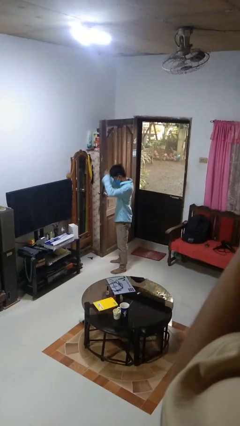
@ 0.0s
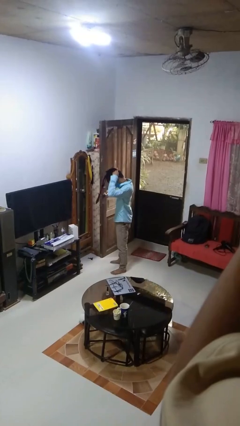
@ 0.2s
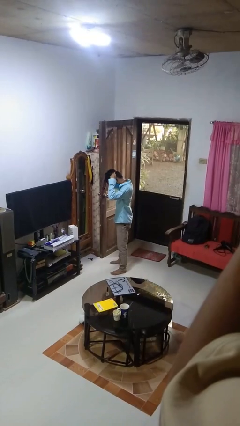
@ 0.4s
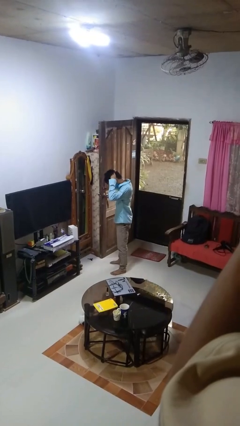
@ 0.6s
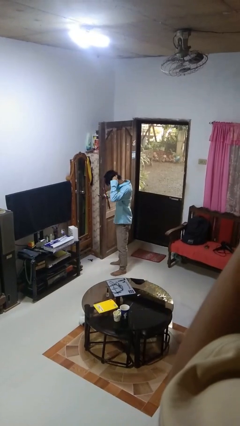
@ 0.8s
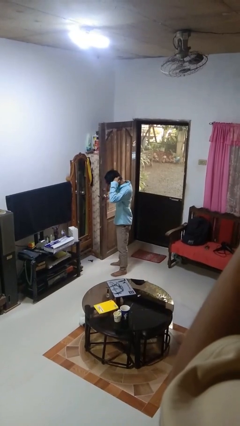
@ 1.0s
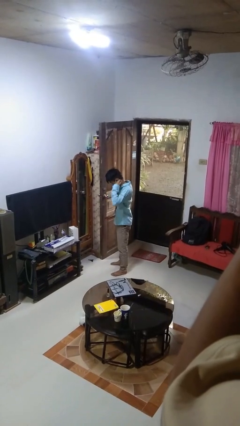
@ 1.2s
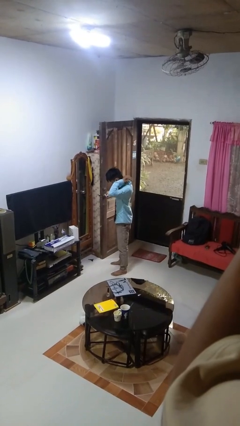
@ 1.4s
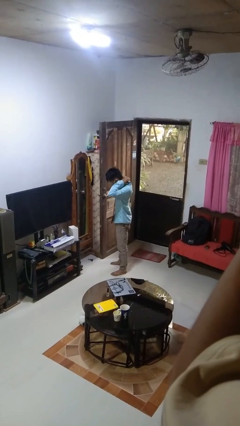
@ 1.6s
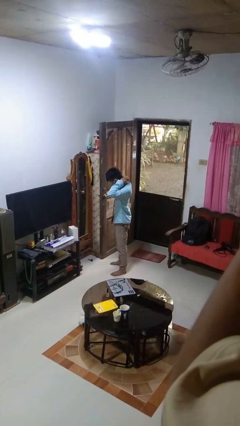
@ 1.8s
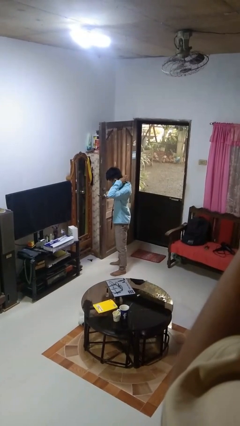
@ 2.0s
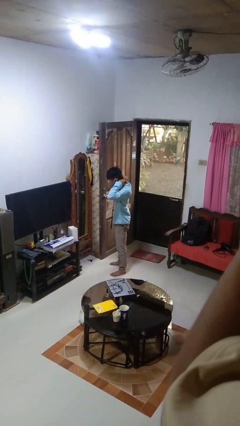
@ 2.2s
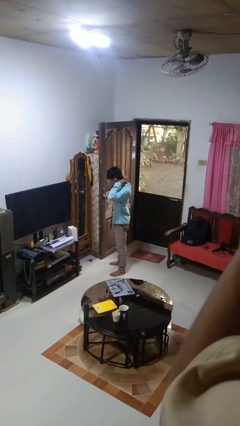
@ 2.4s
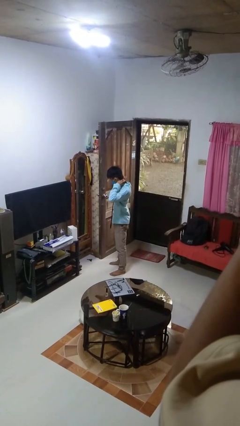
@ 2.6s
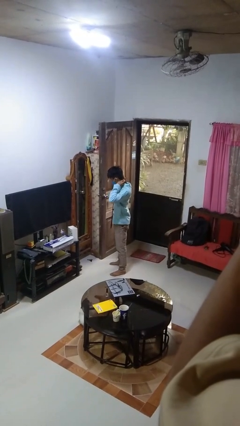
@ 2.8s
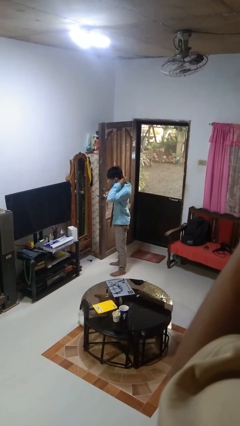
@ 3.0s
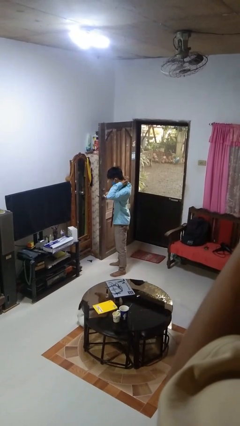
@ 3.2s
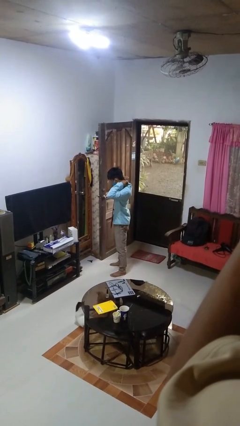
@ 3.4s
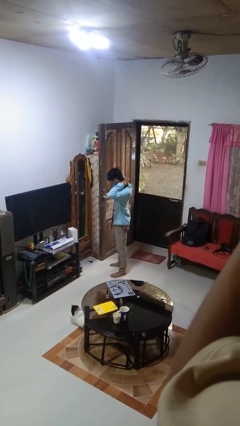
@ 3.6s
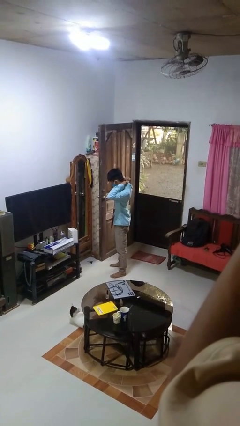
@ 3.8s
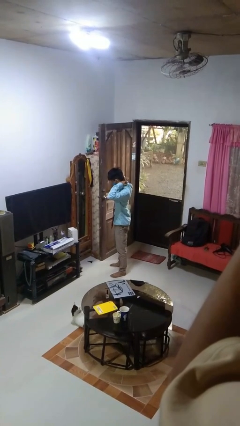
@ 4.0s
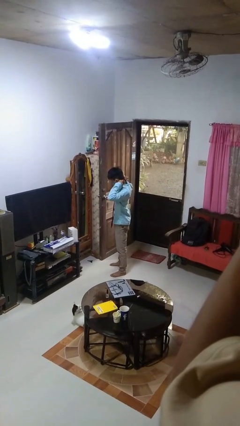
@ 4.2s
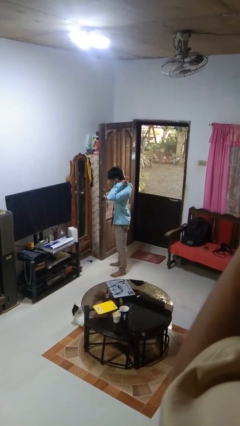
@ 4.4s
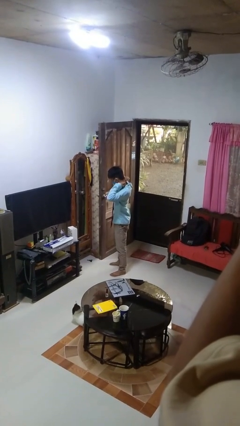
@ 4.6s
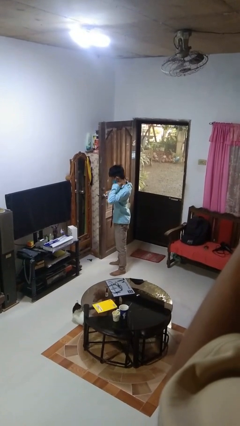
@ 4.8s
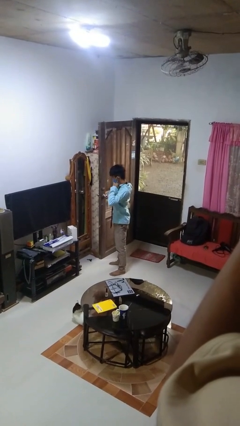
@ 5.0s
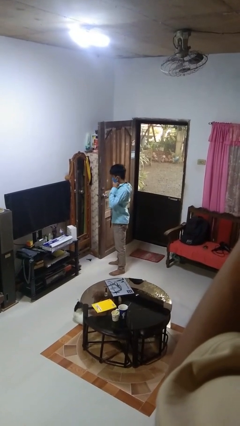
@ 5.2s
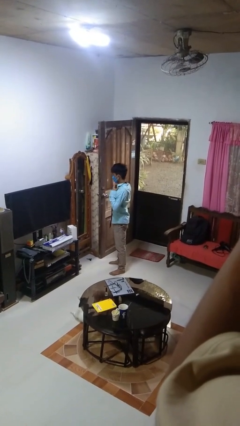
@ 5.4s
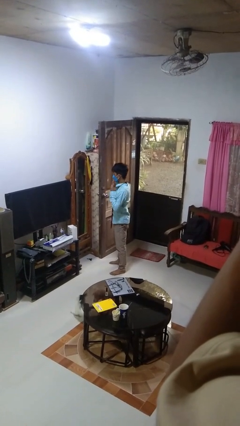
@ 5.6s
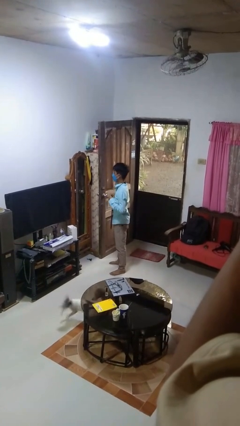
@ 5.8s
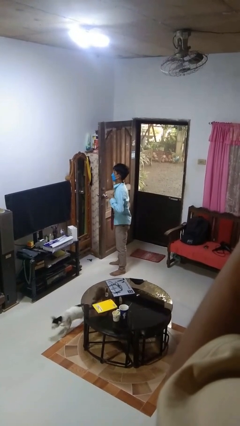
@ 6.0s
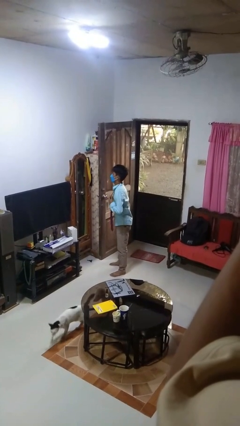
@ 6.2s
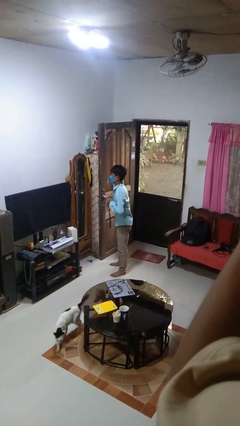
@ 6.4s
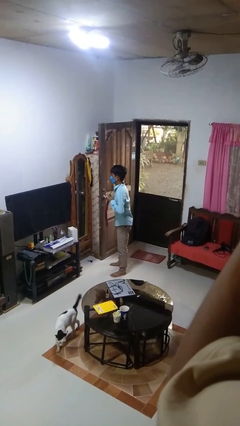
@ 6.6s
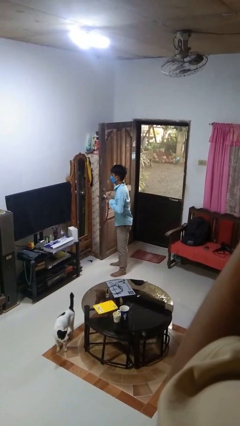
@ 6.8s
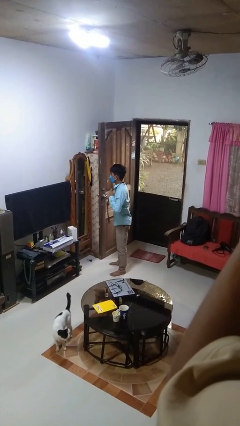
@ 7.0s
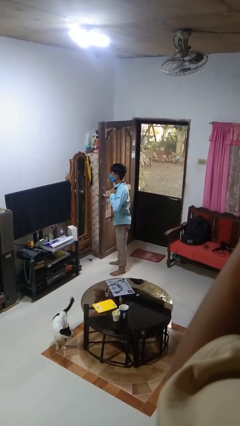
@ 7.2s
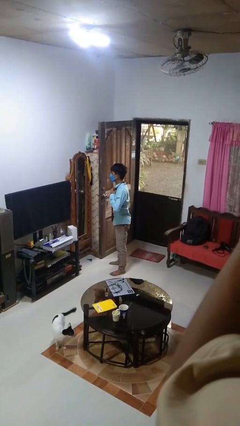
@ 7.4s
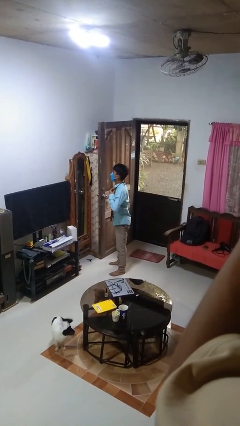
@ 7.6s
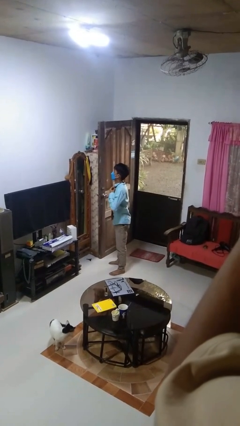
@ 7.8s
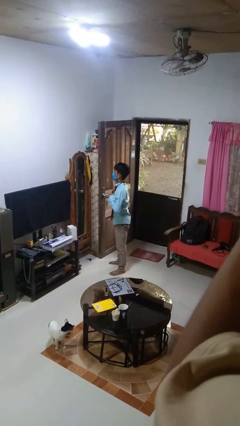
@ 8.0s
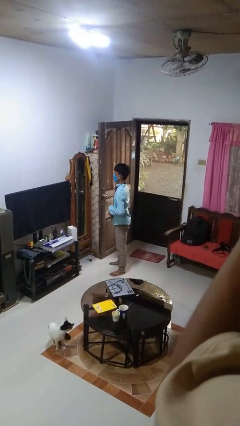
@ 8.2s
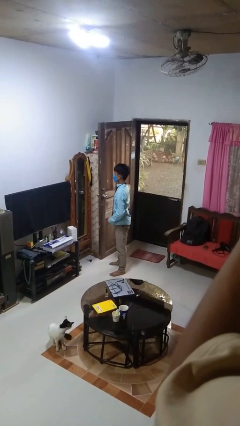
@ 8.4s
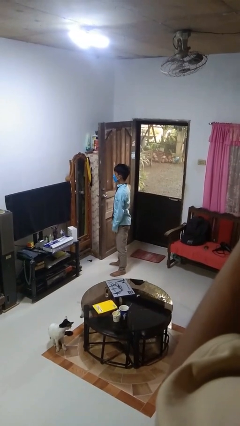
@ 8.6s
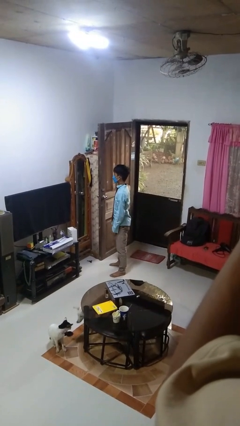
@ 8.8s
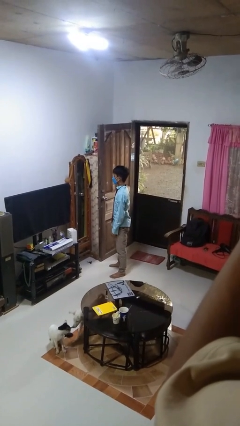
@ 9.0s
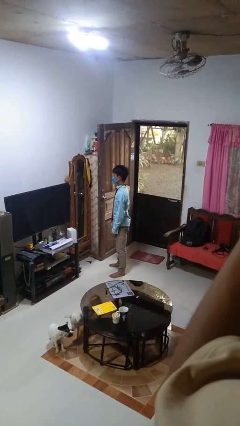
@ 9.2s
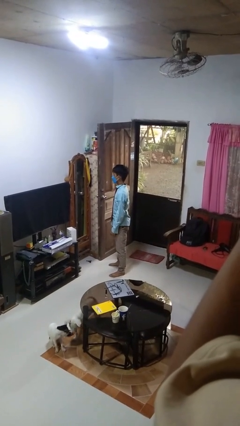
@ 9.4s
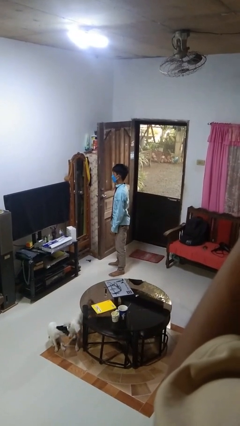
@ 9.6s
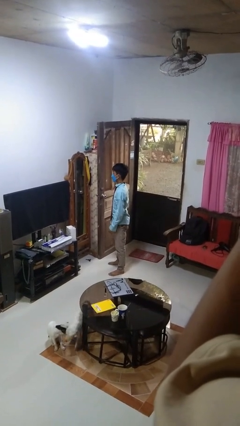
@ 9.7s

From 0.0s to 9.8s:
person puts on necktie

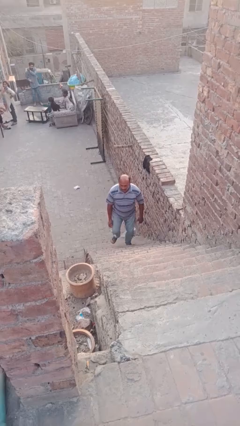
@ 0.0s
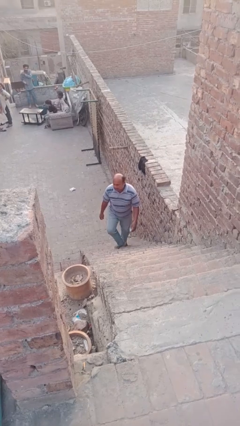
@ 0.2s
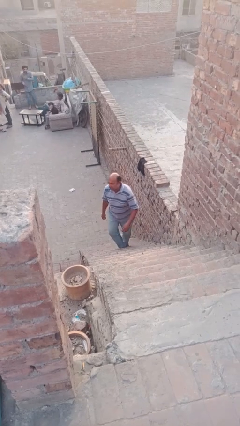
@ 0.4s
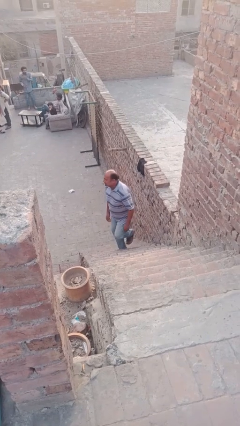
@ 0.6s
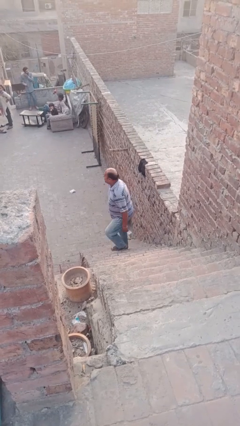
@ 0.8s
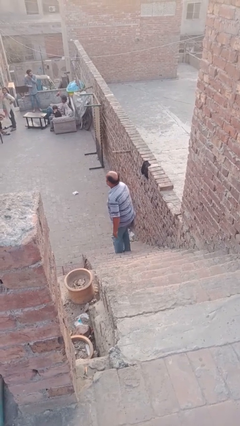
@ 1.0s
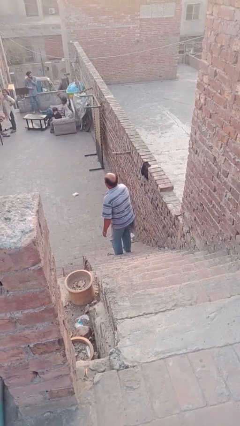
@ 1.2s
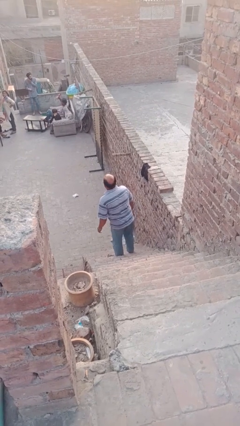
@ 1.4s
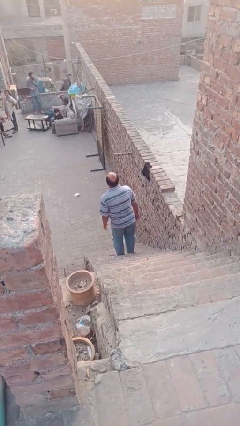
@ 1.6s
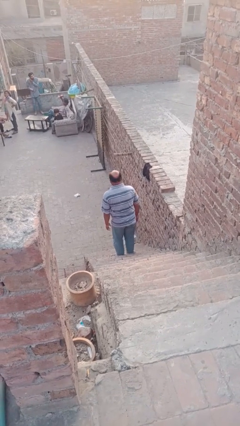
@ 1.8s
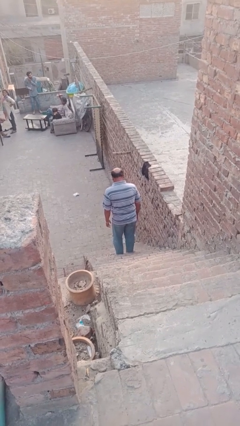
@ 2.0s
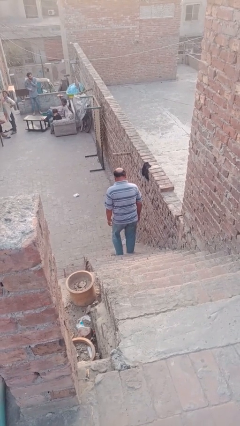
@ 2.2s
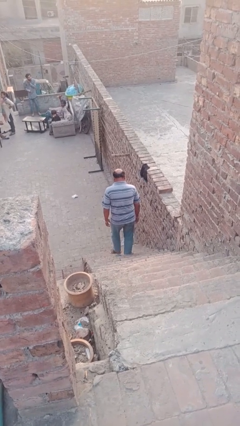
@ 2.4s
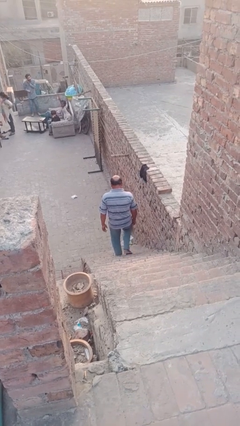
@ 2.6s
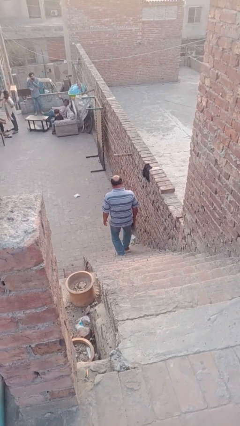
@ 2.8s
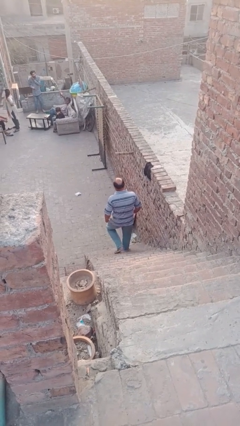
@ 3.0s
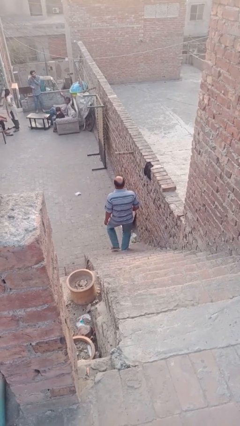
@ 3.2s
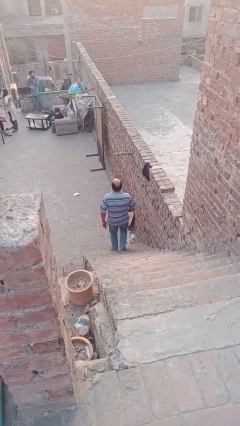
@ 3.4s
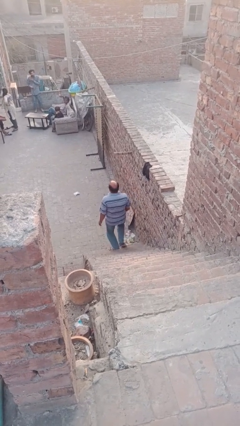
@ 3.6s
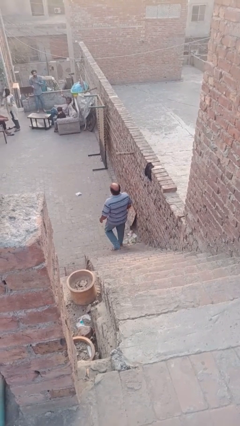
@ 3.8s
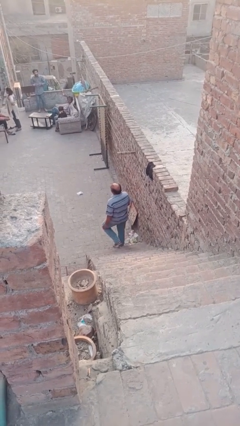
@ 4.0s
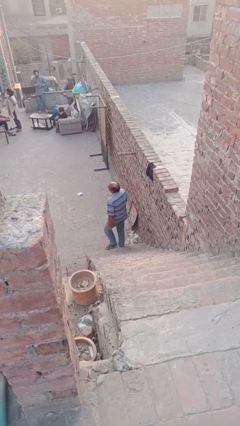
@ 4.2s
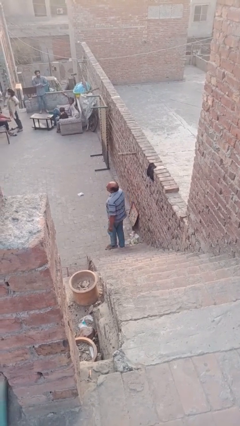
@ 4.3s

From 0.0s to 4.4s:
person climbs down stairs

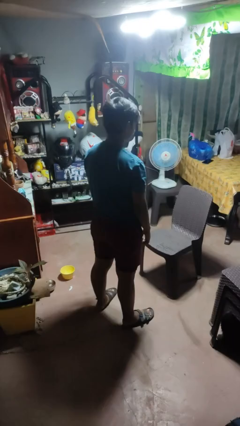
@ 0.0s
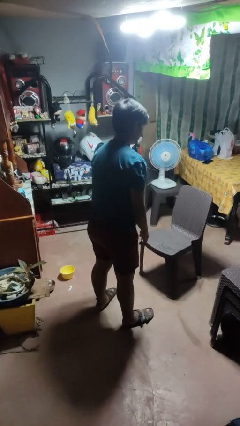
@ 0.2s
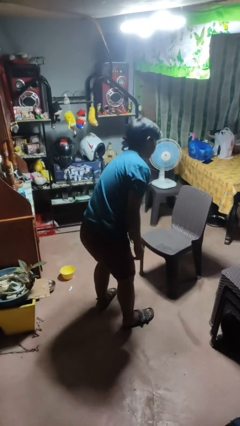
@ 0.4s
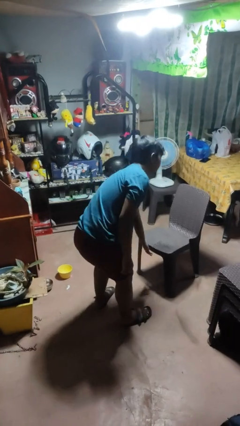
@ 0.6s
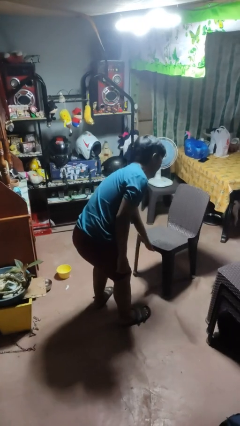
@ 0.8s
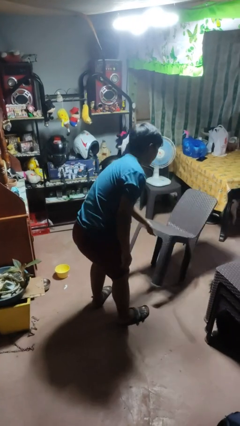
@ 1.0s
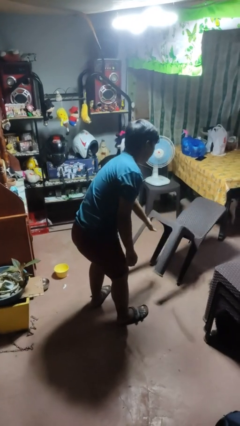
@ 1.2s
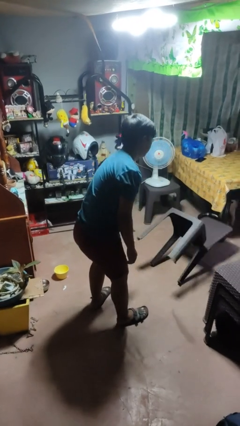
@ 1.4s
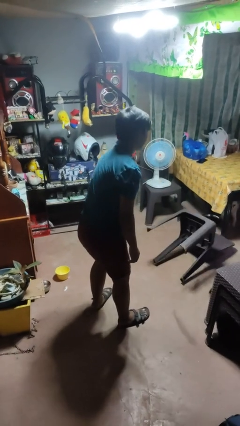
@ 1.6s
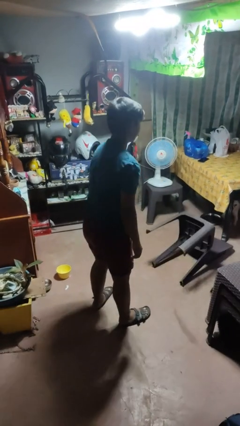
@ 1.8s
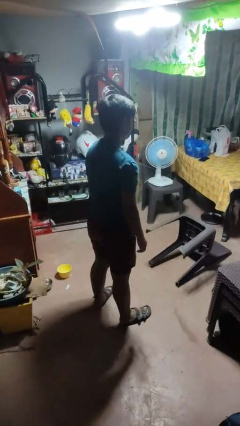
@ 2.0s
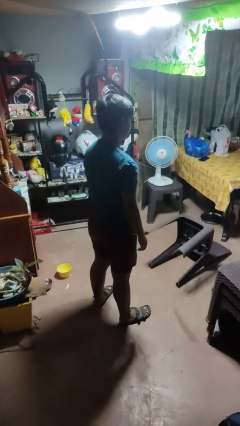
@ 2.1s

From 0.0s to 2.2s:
person knocks over furniture

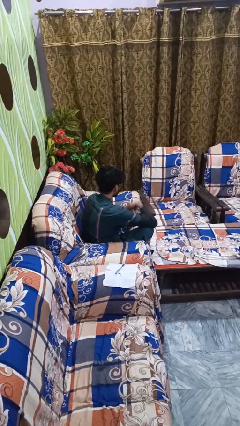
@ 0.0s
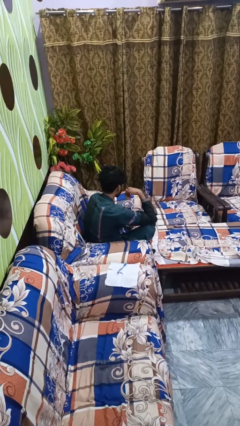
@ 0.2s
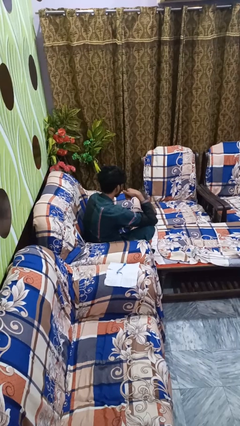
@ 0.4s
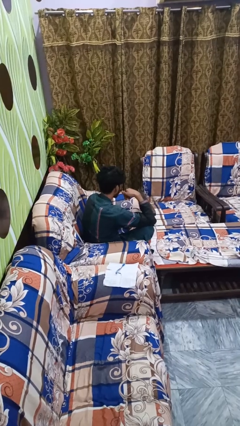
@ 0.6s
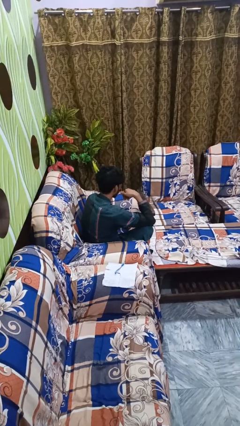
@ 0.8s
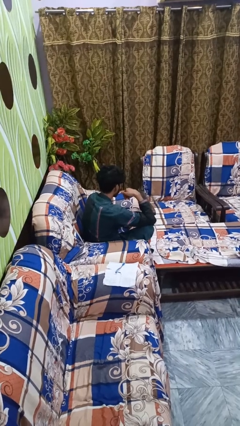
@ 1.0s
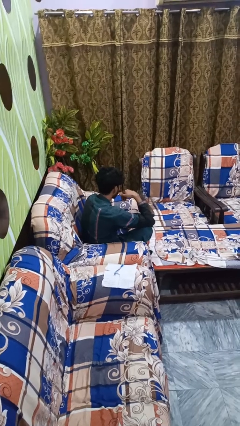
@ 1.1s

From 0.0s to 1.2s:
person gestures call me
